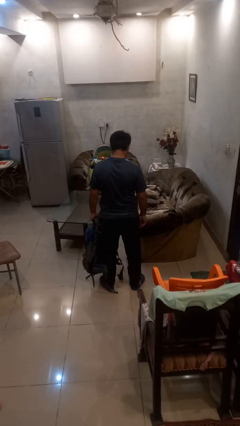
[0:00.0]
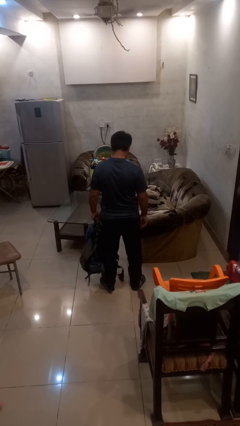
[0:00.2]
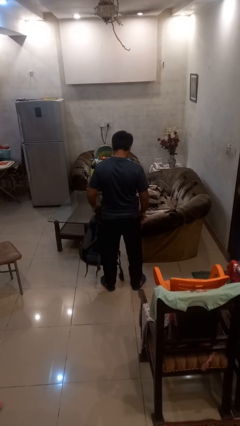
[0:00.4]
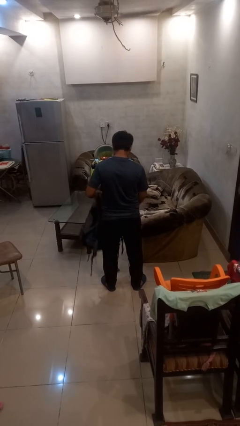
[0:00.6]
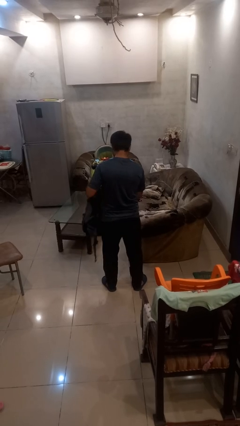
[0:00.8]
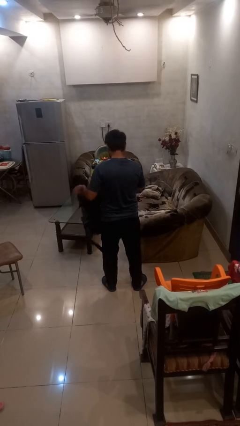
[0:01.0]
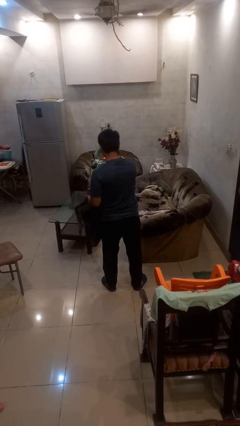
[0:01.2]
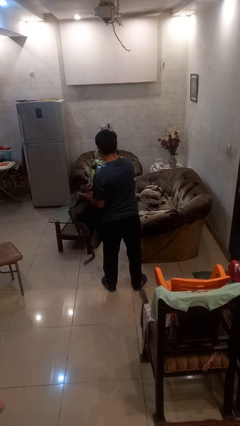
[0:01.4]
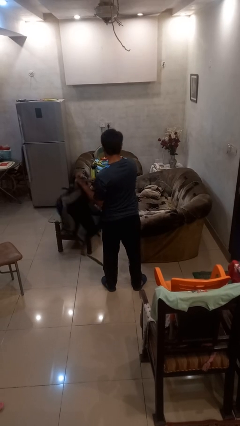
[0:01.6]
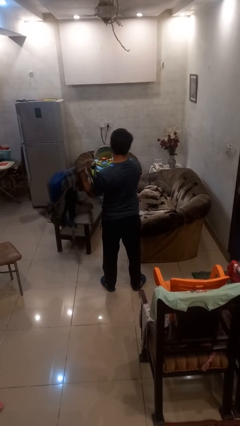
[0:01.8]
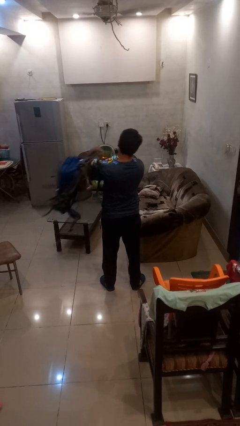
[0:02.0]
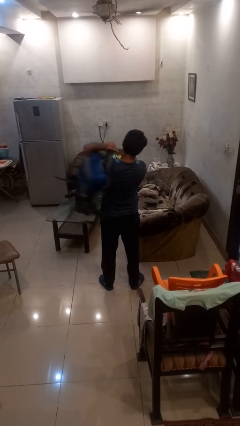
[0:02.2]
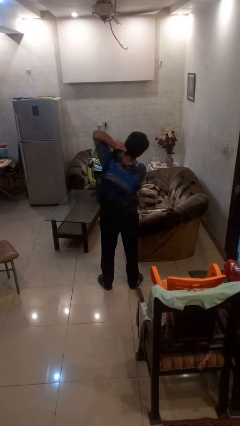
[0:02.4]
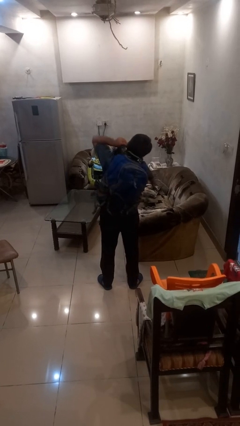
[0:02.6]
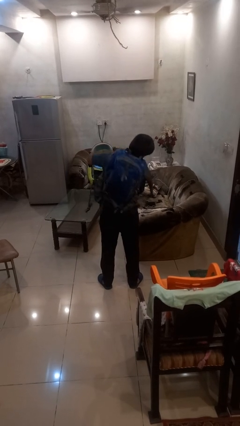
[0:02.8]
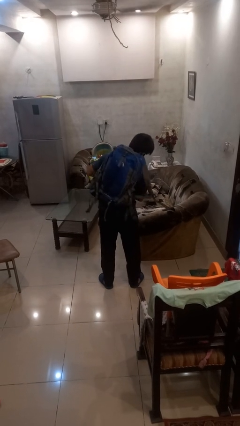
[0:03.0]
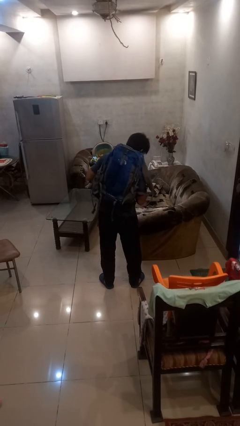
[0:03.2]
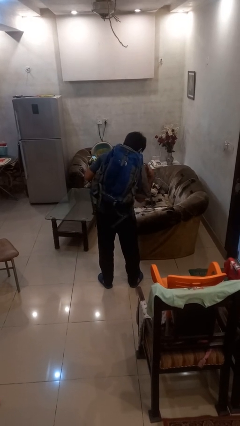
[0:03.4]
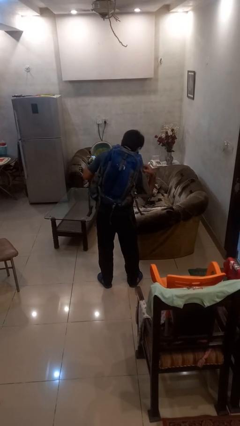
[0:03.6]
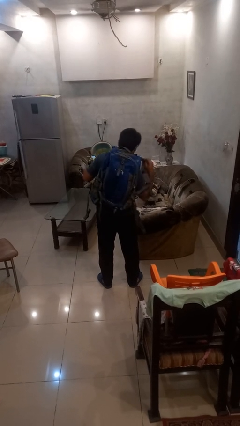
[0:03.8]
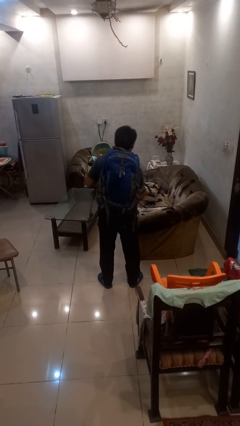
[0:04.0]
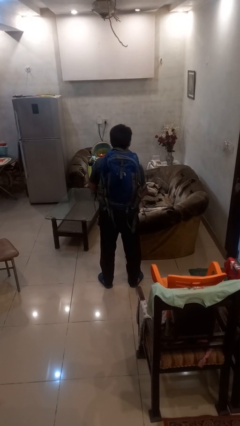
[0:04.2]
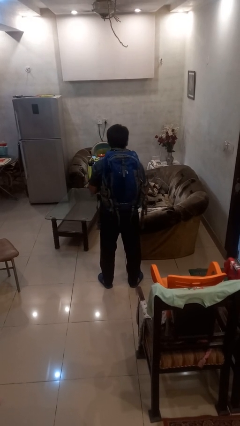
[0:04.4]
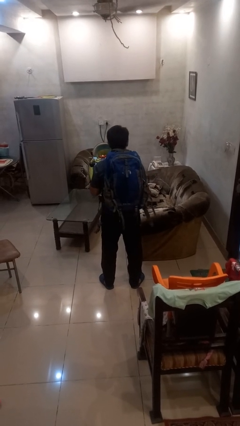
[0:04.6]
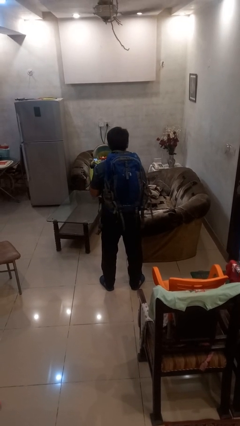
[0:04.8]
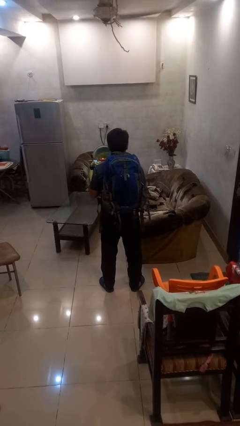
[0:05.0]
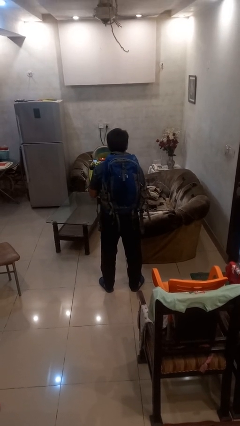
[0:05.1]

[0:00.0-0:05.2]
person puts on backpack

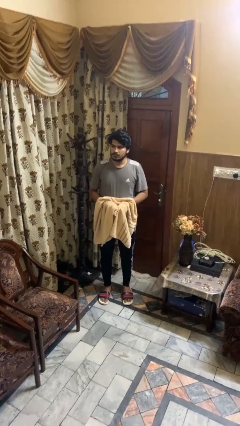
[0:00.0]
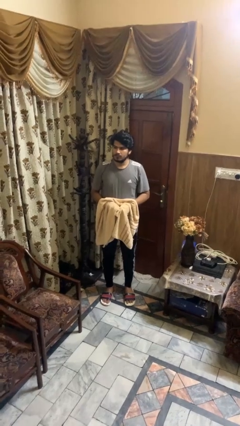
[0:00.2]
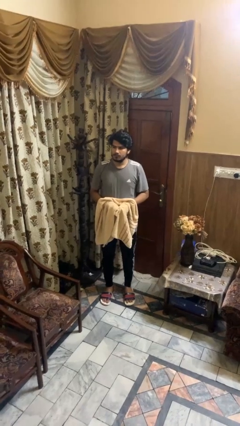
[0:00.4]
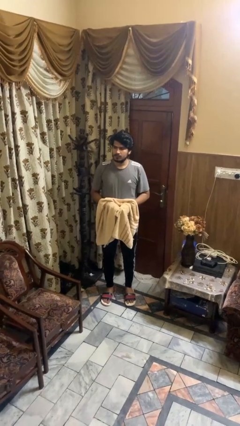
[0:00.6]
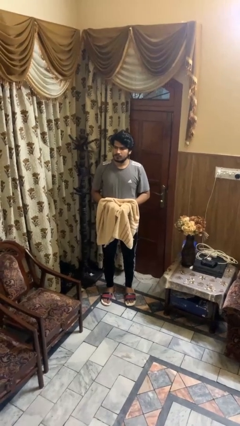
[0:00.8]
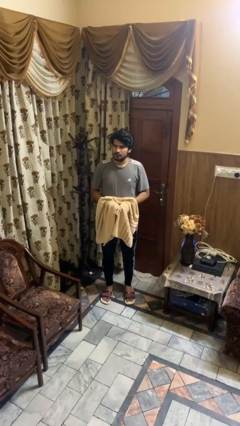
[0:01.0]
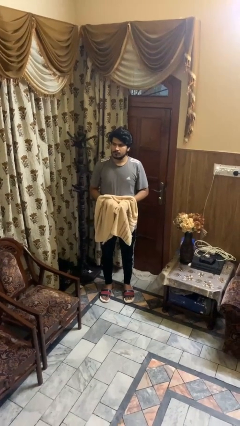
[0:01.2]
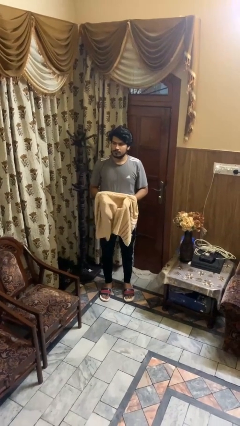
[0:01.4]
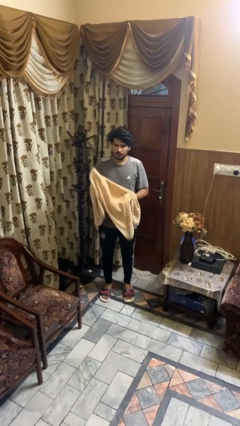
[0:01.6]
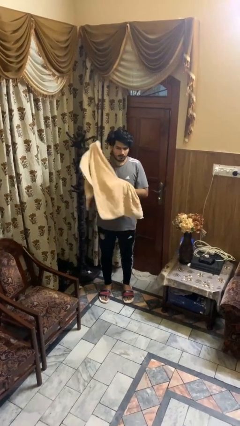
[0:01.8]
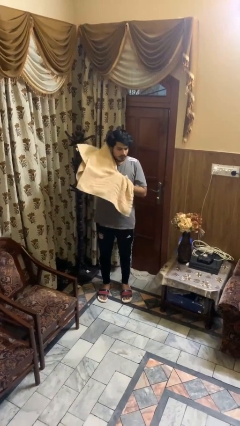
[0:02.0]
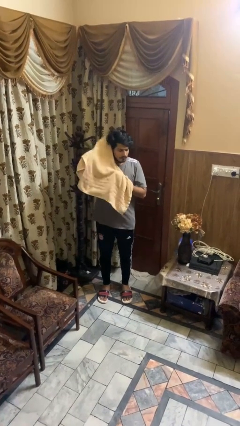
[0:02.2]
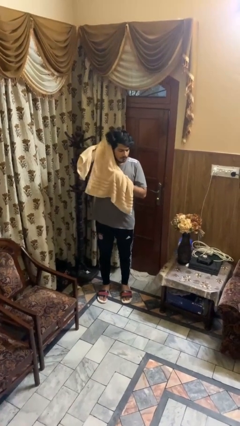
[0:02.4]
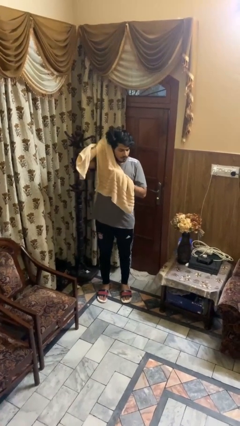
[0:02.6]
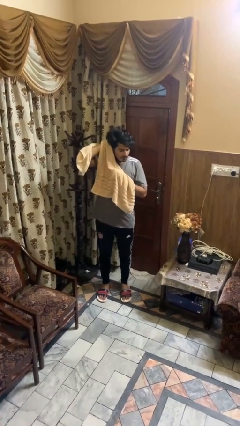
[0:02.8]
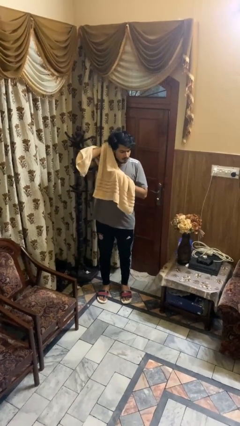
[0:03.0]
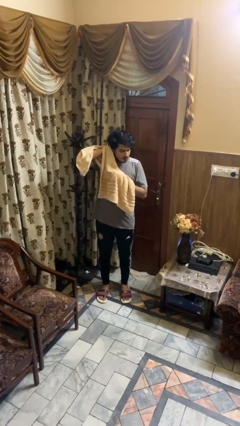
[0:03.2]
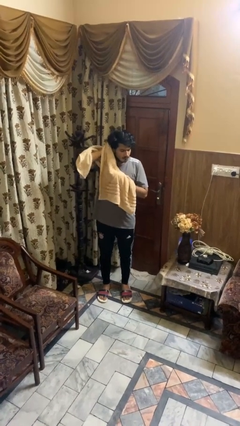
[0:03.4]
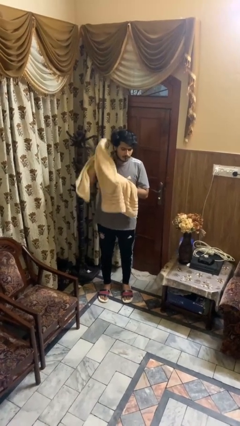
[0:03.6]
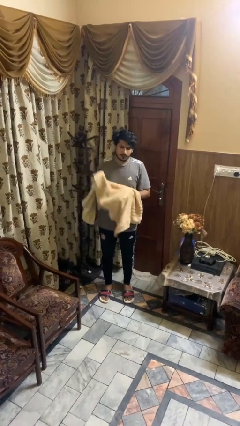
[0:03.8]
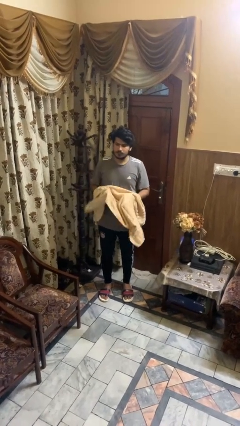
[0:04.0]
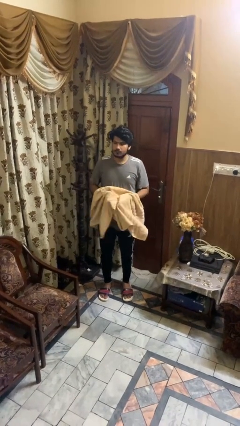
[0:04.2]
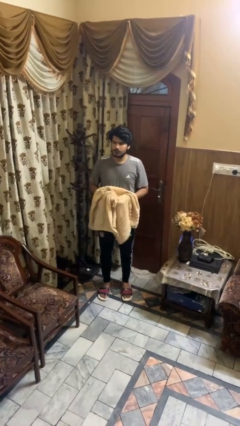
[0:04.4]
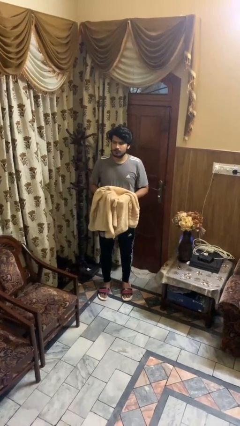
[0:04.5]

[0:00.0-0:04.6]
person dries hair with towel

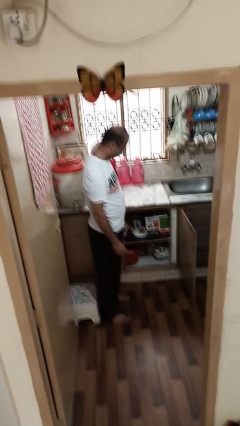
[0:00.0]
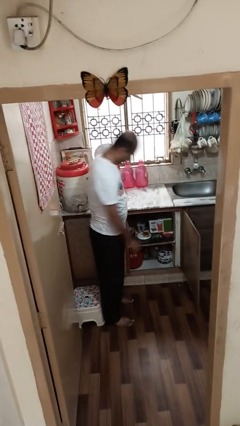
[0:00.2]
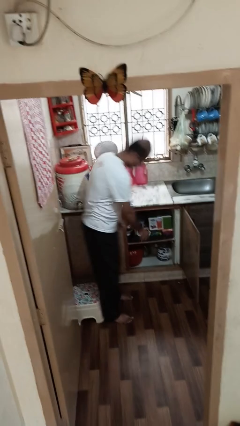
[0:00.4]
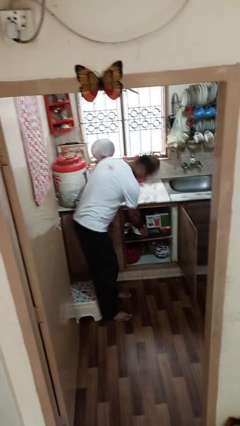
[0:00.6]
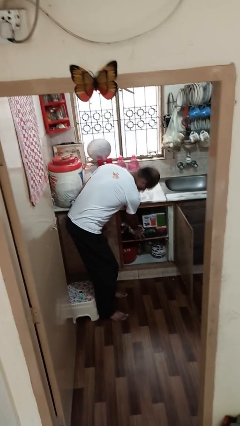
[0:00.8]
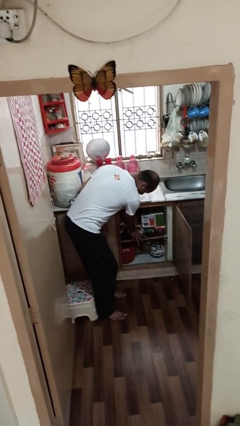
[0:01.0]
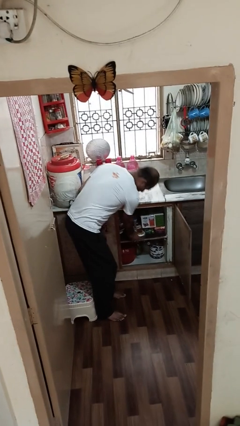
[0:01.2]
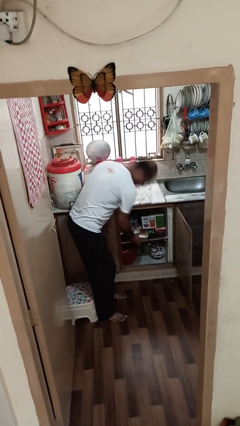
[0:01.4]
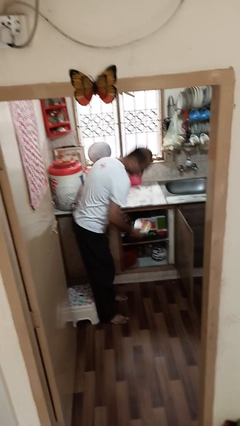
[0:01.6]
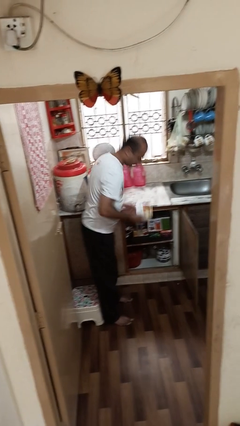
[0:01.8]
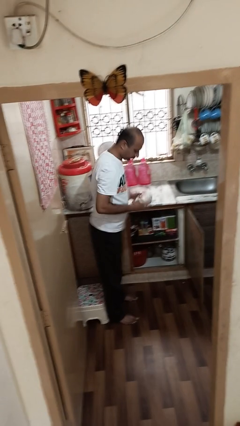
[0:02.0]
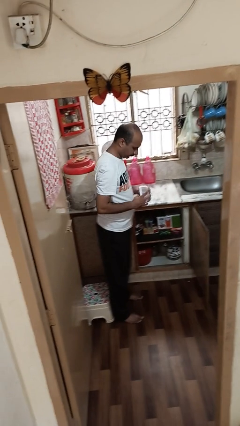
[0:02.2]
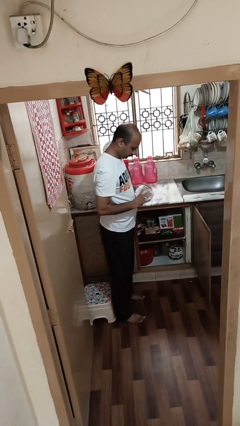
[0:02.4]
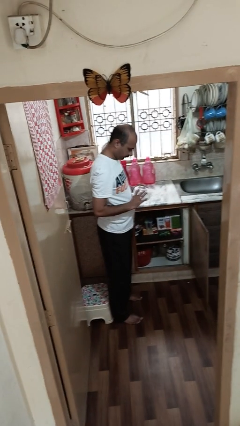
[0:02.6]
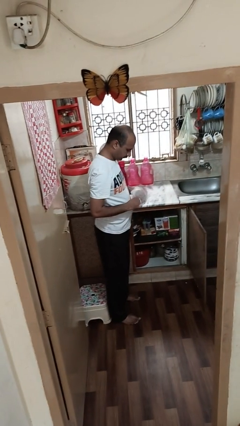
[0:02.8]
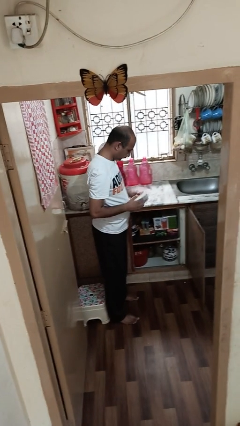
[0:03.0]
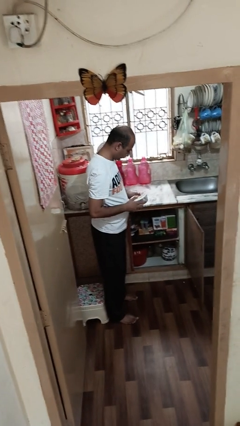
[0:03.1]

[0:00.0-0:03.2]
person picks up object from cabinet

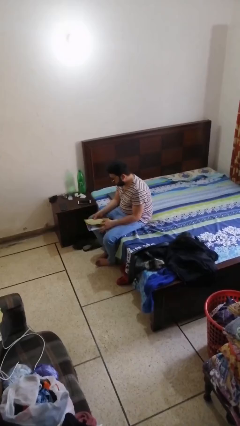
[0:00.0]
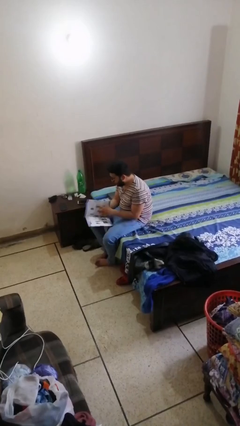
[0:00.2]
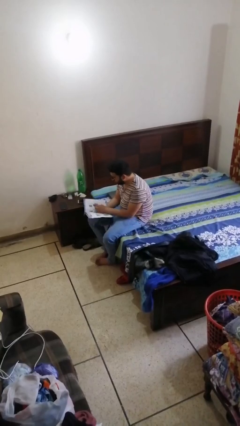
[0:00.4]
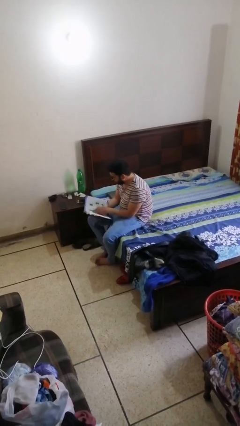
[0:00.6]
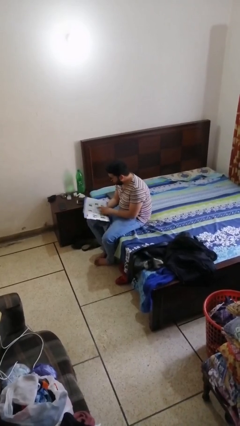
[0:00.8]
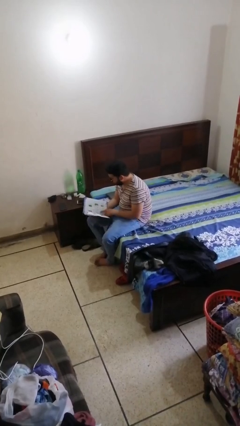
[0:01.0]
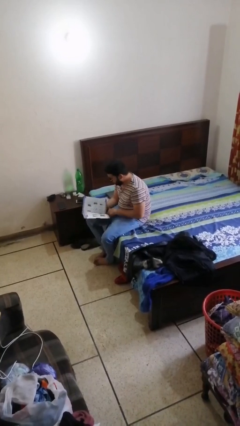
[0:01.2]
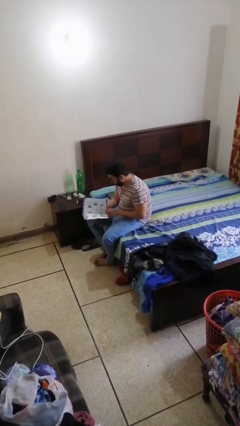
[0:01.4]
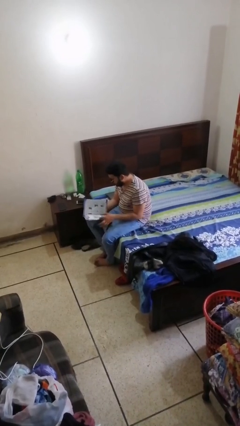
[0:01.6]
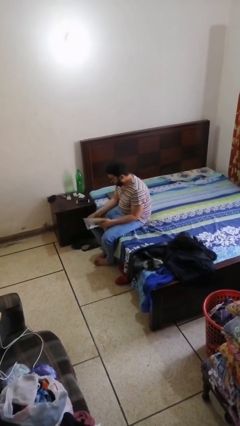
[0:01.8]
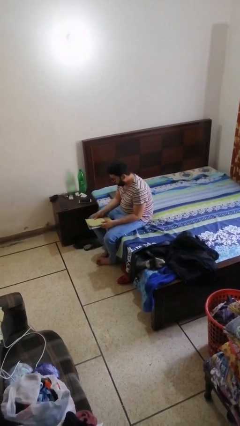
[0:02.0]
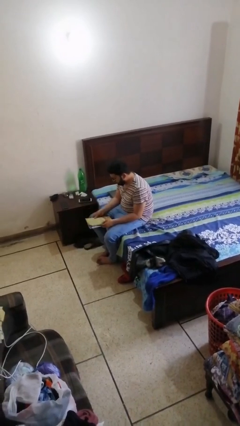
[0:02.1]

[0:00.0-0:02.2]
person reads document

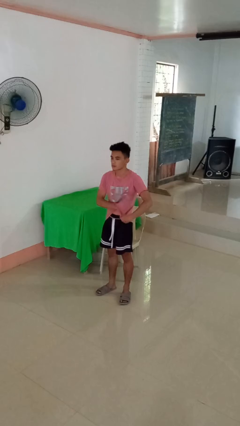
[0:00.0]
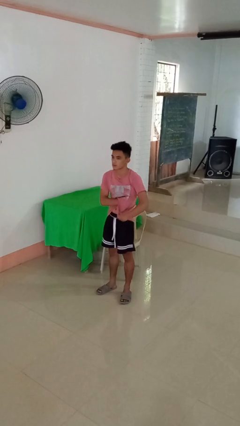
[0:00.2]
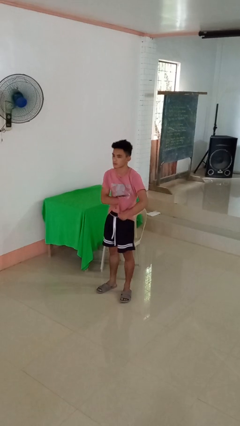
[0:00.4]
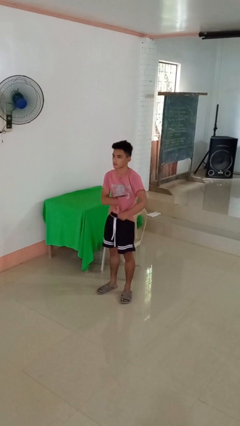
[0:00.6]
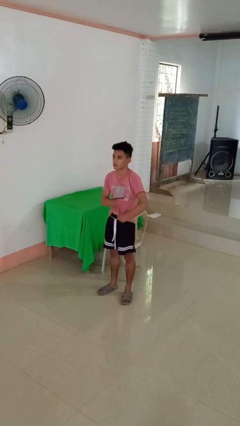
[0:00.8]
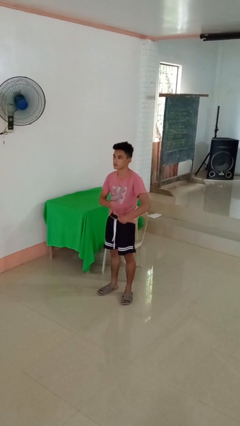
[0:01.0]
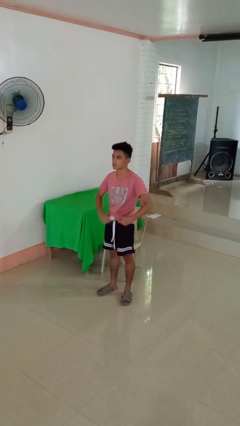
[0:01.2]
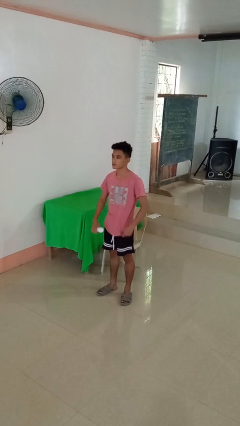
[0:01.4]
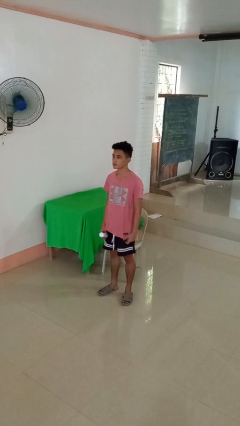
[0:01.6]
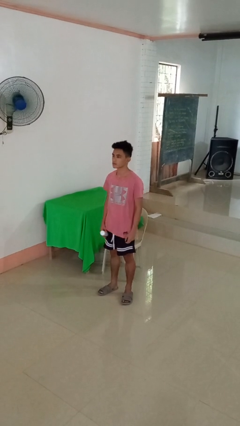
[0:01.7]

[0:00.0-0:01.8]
person applies deodorant

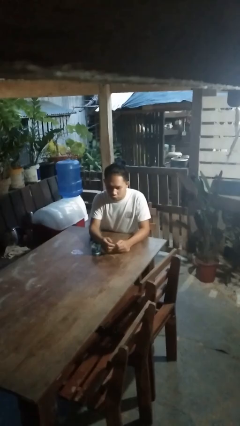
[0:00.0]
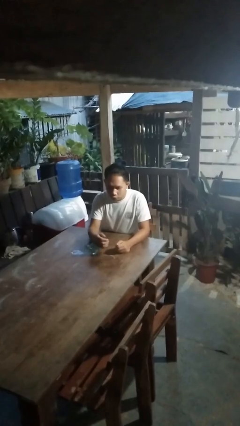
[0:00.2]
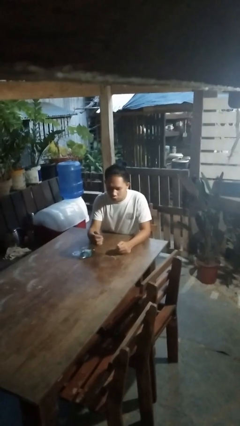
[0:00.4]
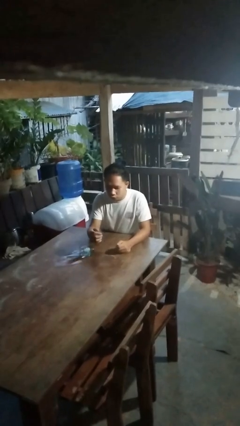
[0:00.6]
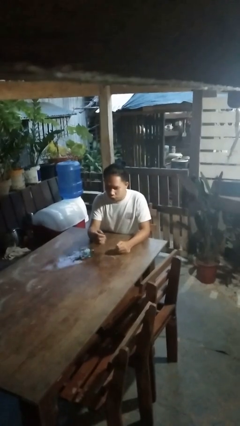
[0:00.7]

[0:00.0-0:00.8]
person spills on table
